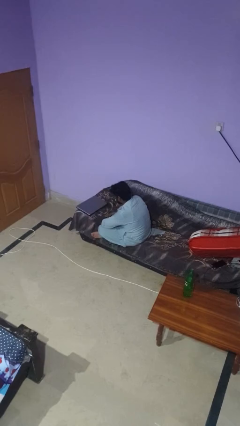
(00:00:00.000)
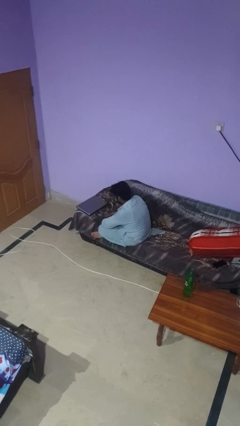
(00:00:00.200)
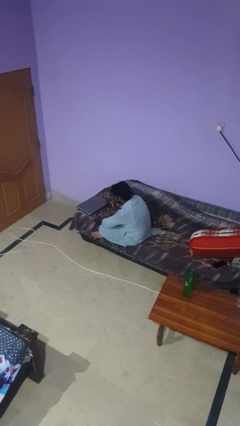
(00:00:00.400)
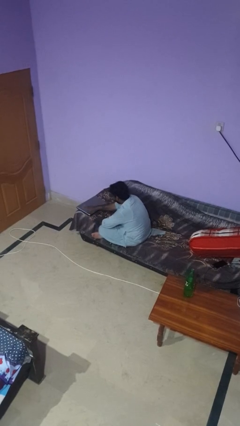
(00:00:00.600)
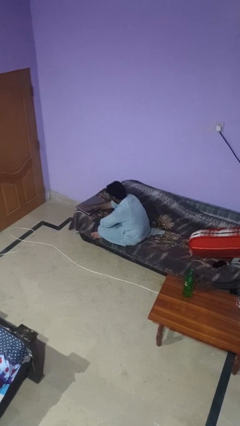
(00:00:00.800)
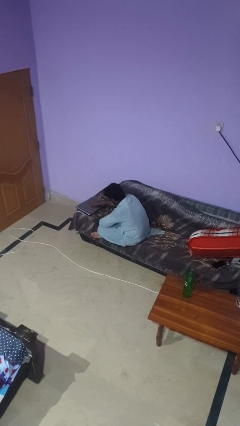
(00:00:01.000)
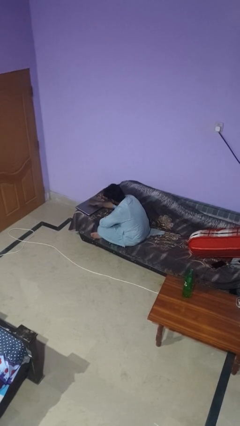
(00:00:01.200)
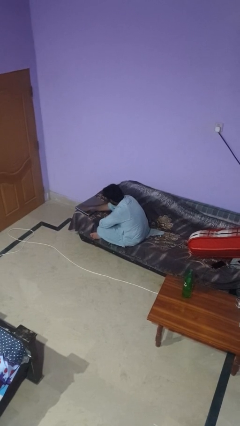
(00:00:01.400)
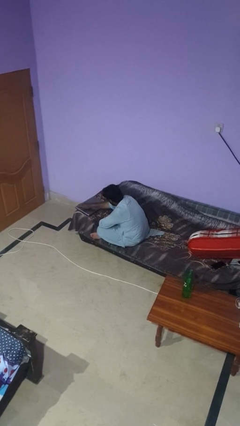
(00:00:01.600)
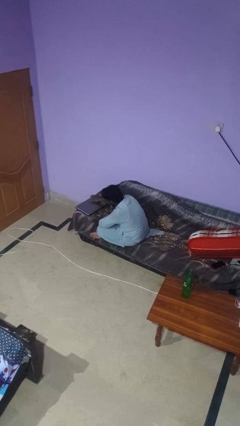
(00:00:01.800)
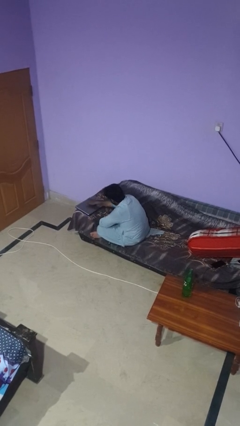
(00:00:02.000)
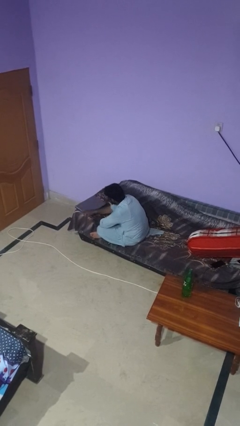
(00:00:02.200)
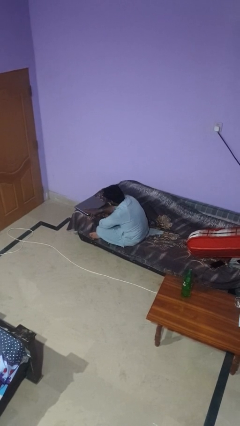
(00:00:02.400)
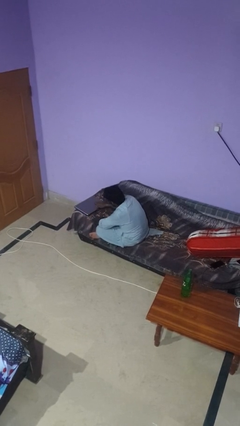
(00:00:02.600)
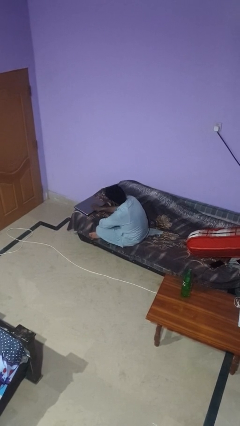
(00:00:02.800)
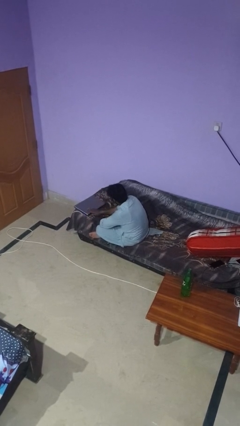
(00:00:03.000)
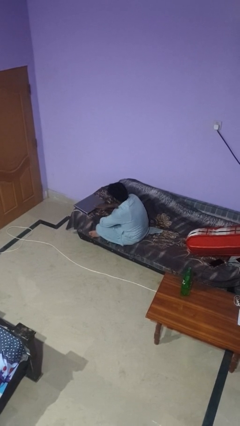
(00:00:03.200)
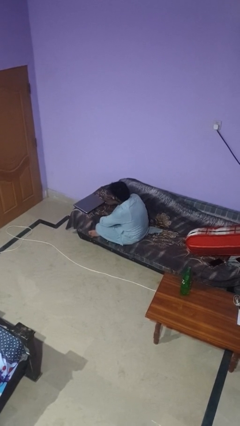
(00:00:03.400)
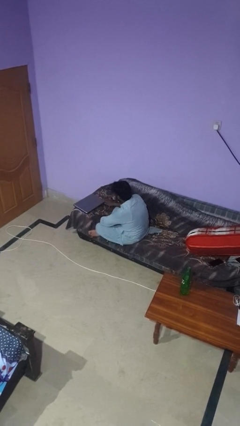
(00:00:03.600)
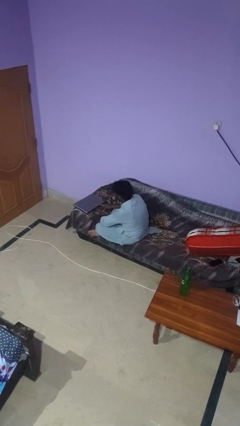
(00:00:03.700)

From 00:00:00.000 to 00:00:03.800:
person waves hand over object

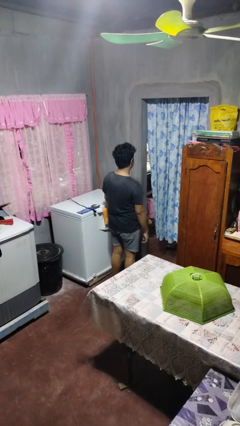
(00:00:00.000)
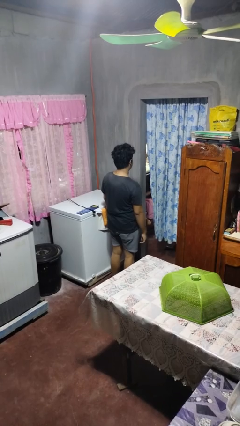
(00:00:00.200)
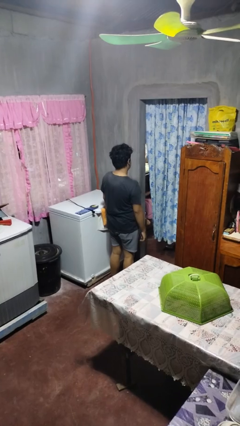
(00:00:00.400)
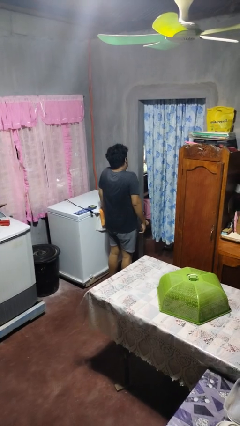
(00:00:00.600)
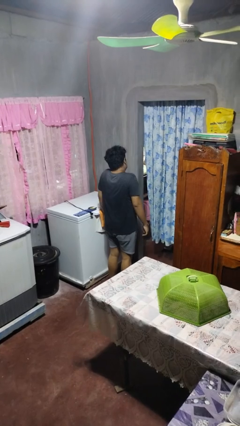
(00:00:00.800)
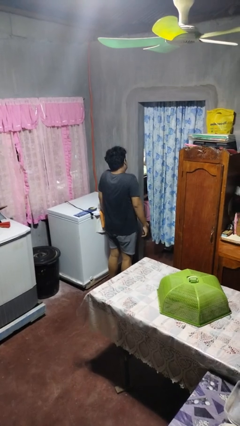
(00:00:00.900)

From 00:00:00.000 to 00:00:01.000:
person shrugs

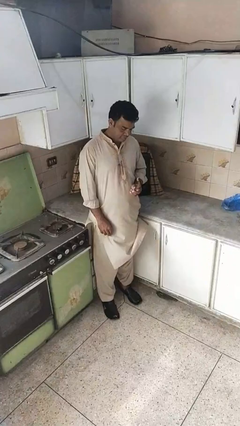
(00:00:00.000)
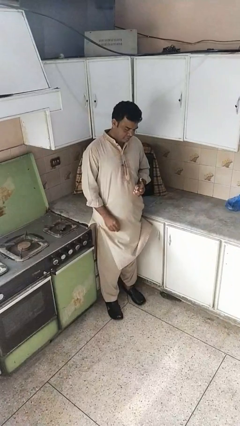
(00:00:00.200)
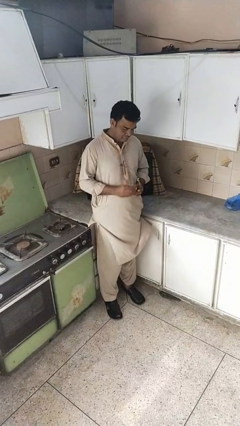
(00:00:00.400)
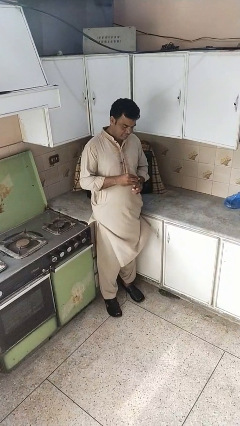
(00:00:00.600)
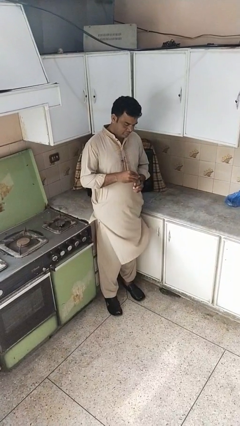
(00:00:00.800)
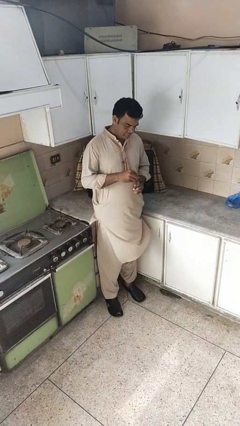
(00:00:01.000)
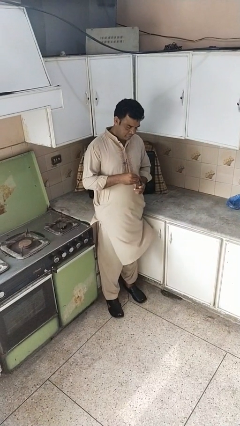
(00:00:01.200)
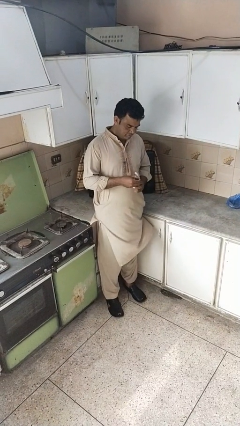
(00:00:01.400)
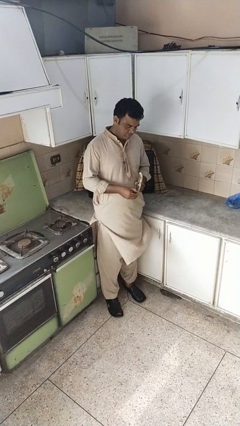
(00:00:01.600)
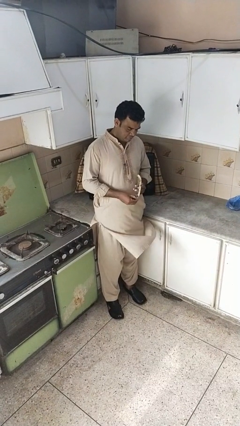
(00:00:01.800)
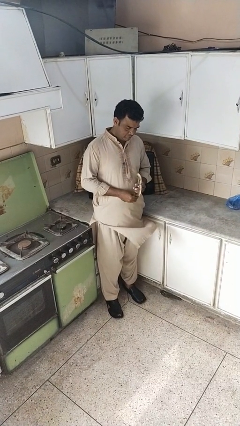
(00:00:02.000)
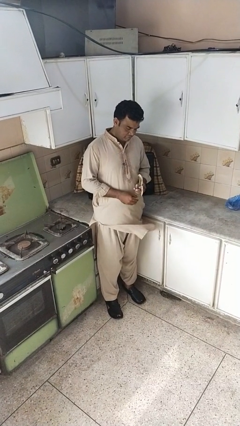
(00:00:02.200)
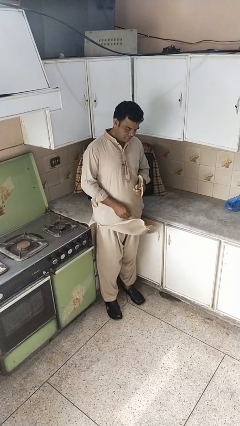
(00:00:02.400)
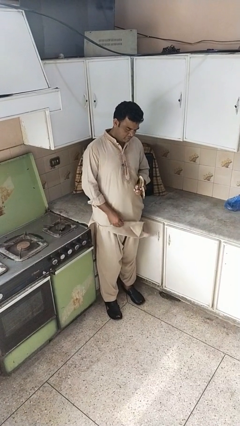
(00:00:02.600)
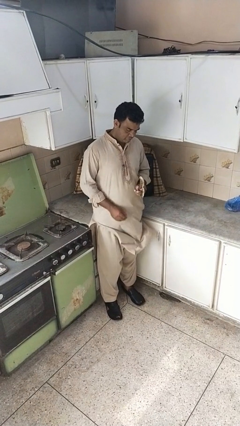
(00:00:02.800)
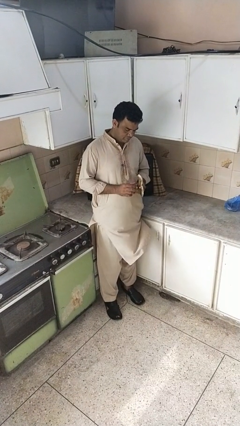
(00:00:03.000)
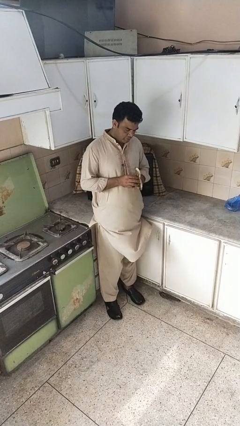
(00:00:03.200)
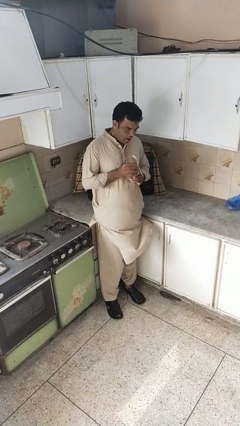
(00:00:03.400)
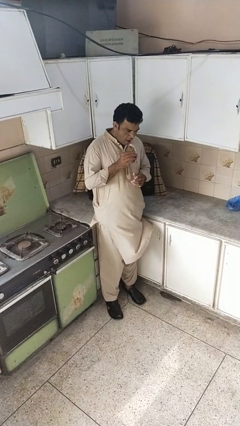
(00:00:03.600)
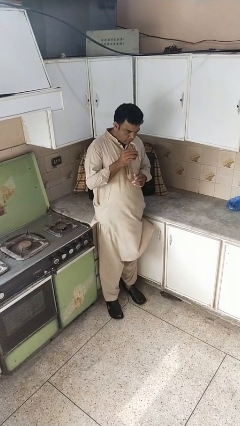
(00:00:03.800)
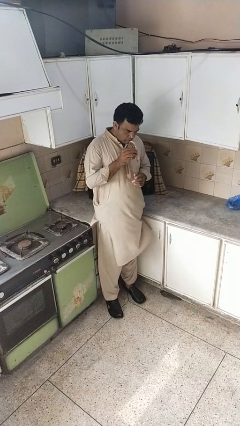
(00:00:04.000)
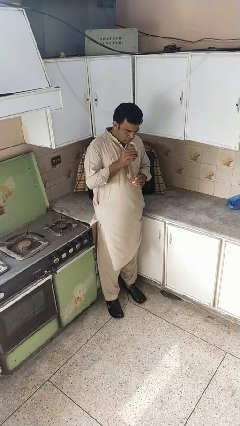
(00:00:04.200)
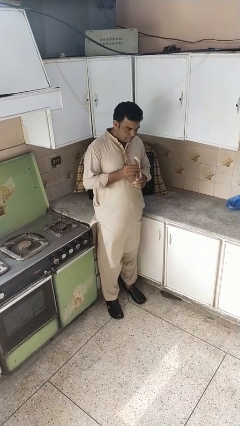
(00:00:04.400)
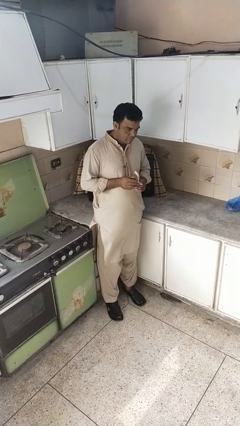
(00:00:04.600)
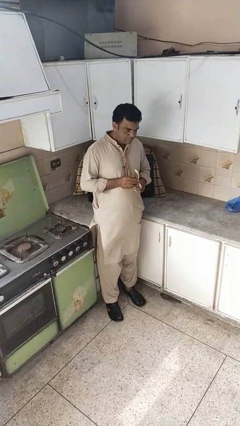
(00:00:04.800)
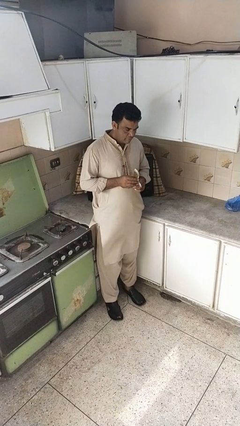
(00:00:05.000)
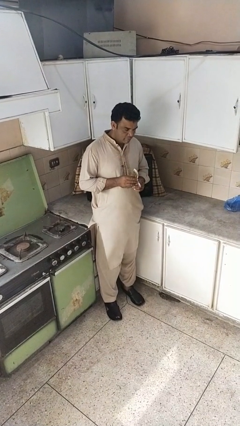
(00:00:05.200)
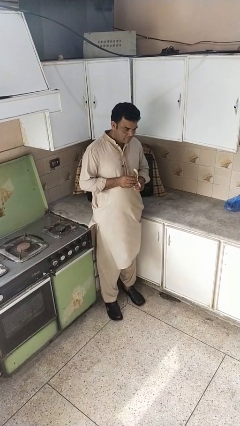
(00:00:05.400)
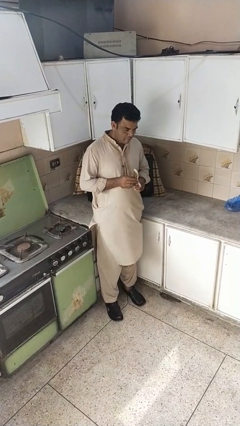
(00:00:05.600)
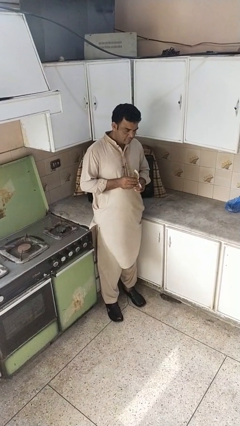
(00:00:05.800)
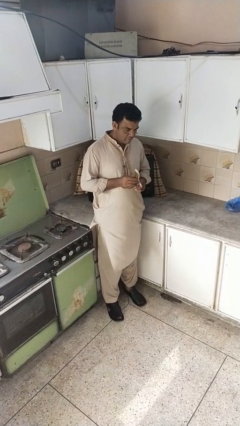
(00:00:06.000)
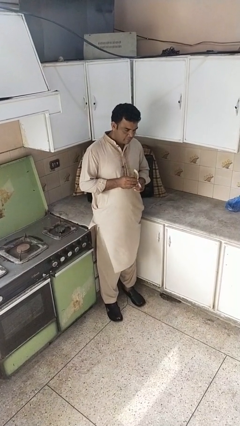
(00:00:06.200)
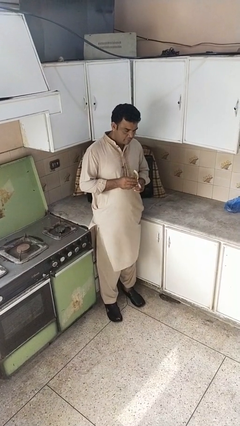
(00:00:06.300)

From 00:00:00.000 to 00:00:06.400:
person eats banana

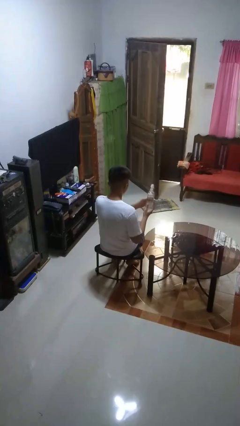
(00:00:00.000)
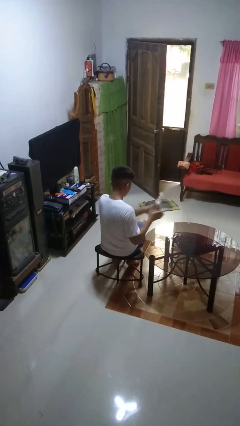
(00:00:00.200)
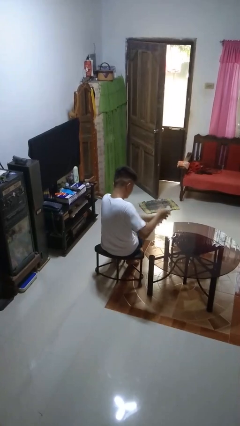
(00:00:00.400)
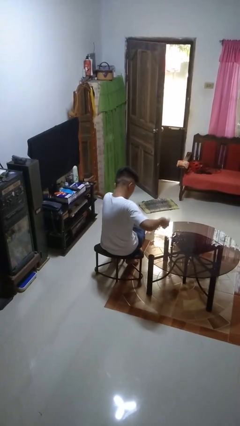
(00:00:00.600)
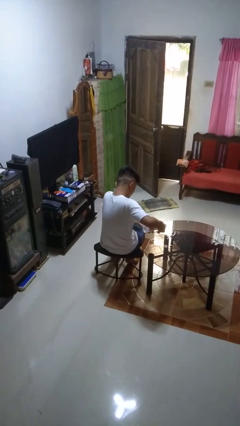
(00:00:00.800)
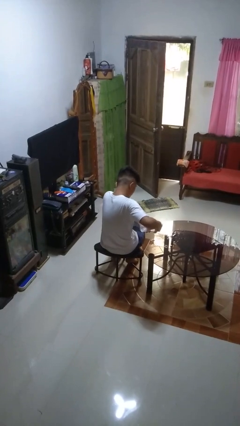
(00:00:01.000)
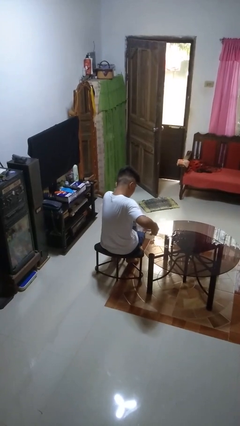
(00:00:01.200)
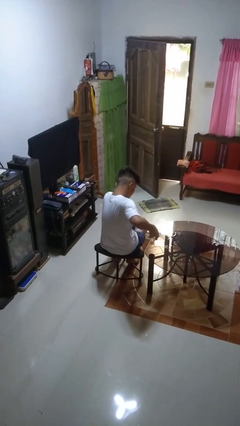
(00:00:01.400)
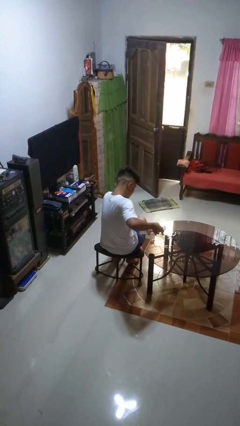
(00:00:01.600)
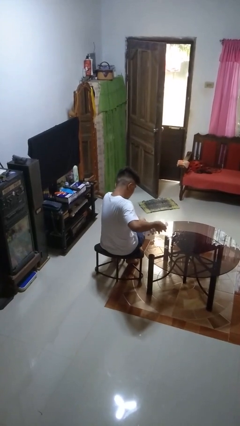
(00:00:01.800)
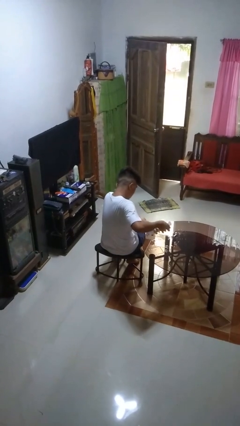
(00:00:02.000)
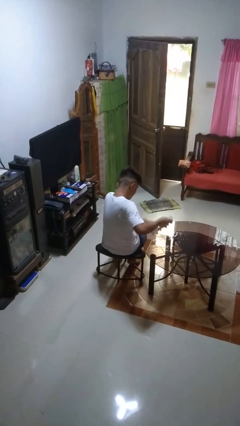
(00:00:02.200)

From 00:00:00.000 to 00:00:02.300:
person sprays from bottle

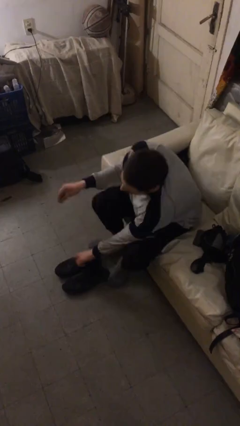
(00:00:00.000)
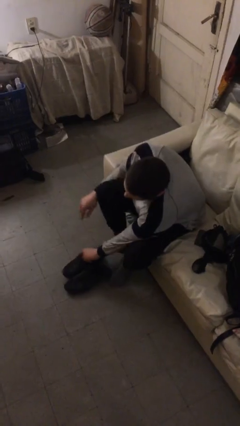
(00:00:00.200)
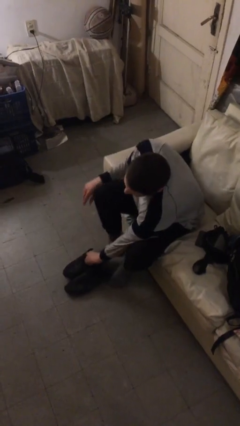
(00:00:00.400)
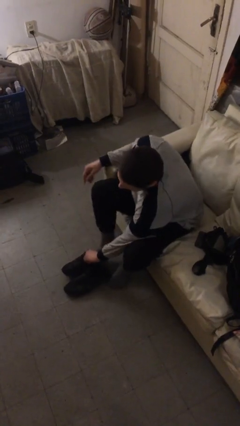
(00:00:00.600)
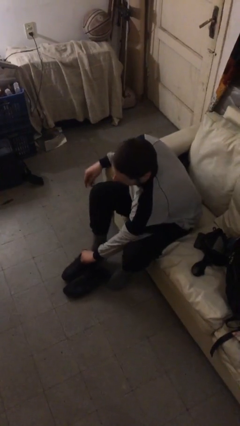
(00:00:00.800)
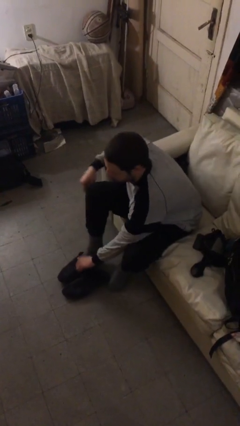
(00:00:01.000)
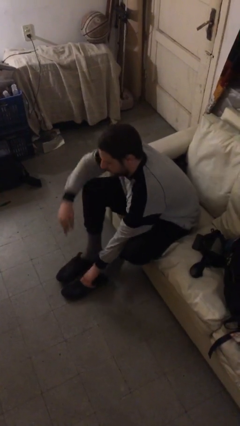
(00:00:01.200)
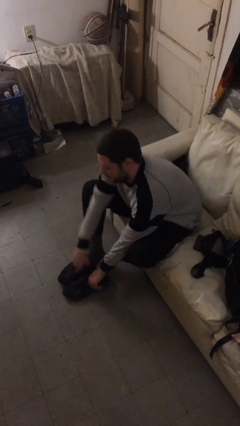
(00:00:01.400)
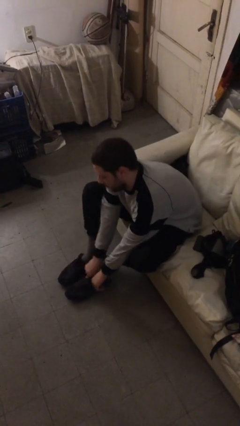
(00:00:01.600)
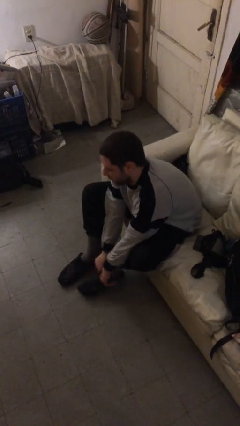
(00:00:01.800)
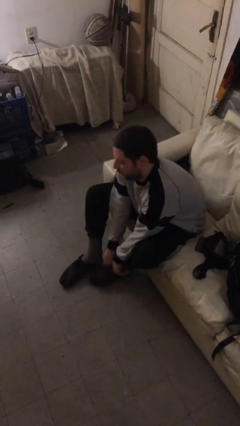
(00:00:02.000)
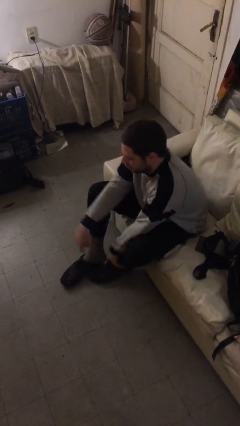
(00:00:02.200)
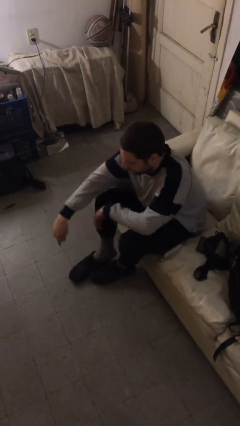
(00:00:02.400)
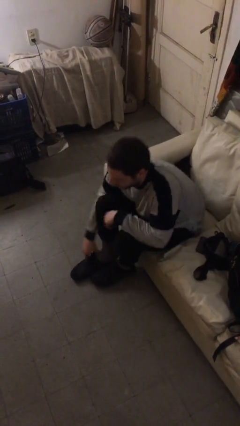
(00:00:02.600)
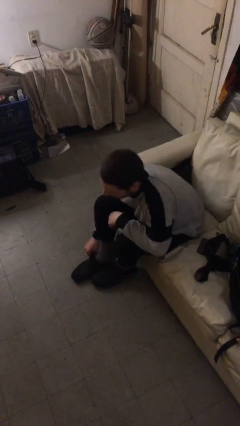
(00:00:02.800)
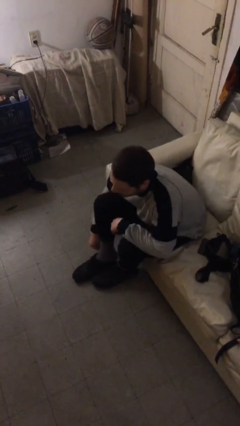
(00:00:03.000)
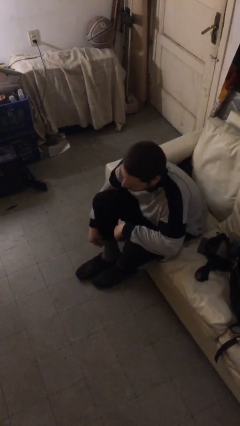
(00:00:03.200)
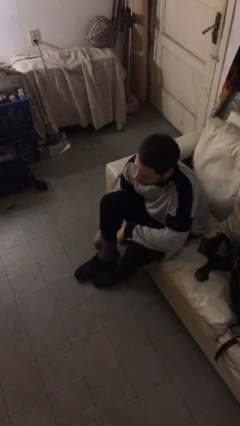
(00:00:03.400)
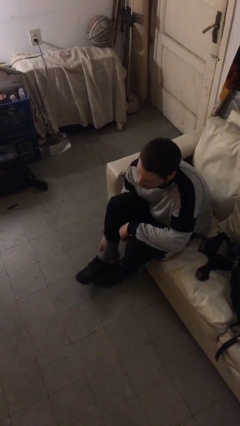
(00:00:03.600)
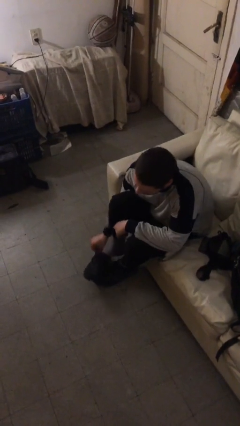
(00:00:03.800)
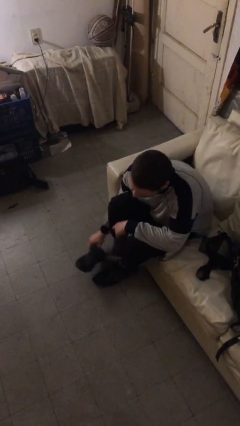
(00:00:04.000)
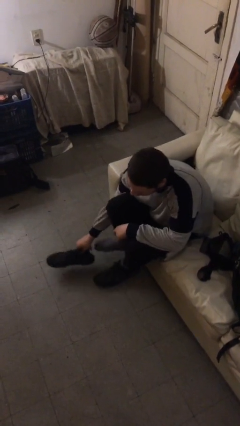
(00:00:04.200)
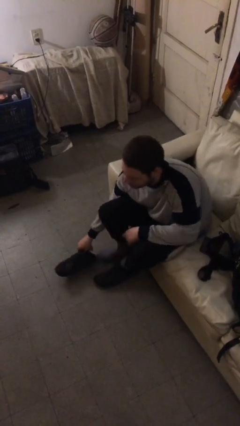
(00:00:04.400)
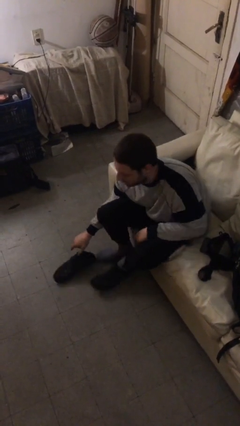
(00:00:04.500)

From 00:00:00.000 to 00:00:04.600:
person puts on shoes
